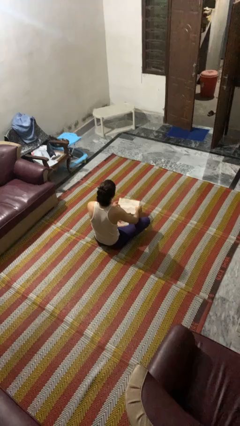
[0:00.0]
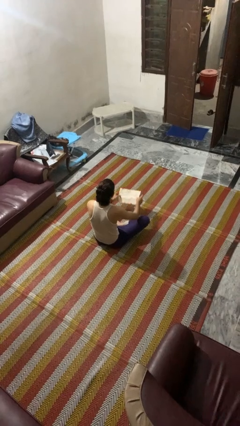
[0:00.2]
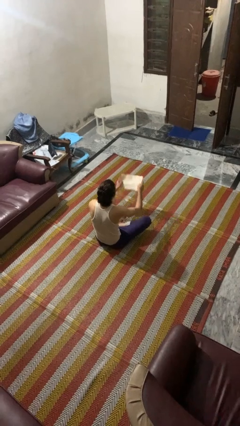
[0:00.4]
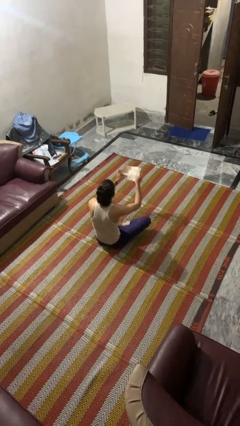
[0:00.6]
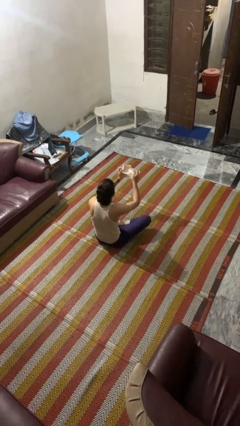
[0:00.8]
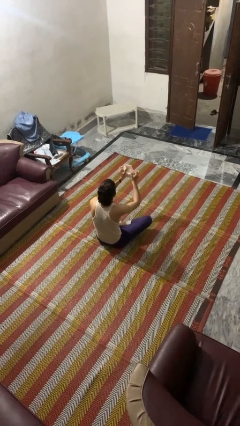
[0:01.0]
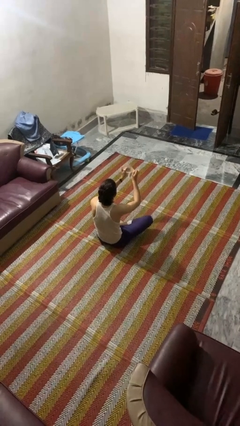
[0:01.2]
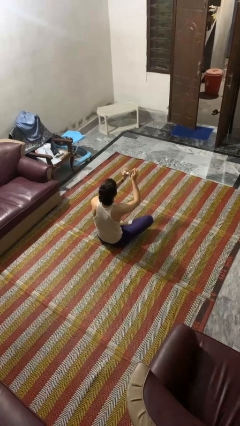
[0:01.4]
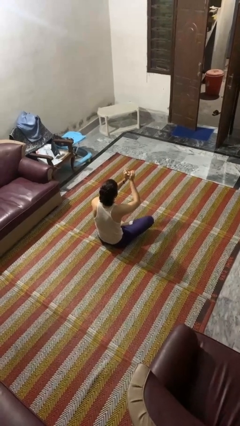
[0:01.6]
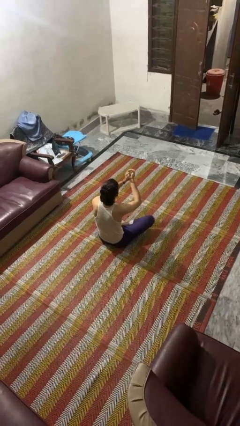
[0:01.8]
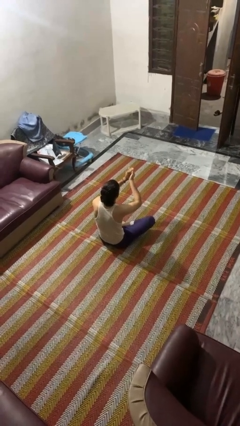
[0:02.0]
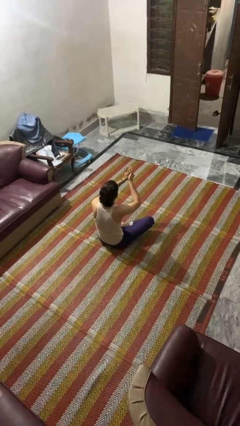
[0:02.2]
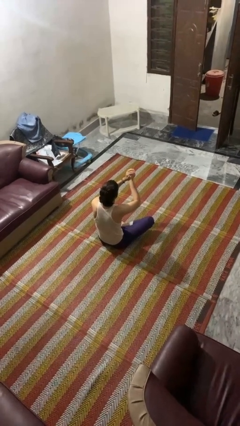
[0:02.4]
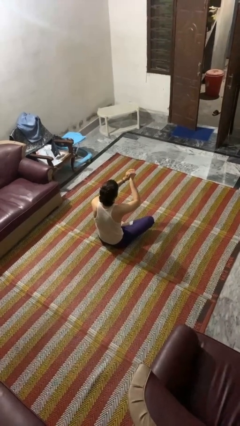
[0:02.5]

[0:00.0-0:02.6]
person crumples paper

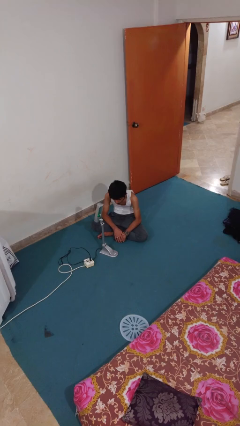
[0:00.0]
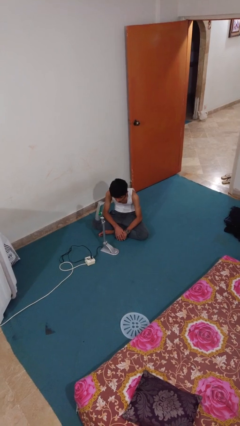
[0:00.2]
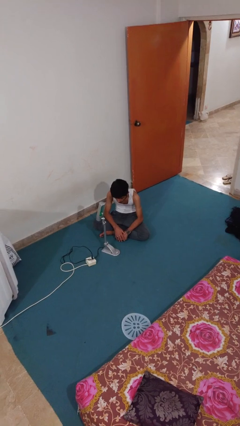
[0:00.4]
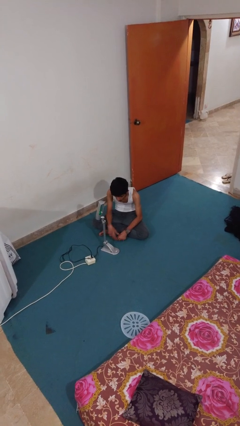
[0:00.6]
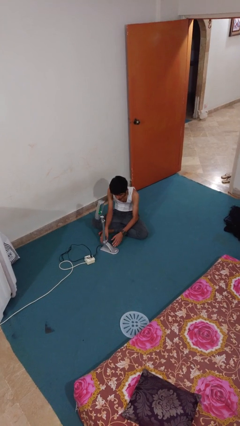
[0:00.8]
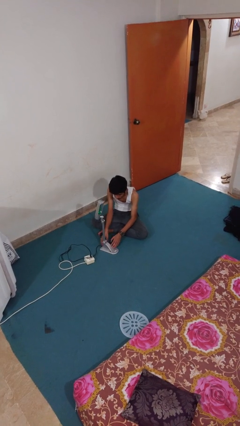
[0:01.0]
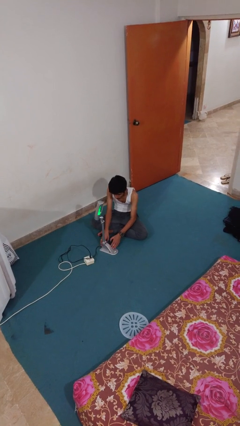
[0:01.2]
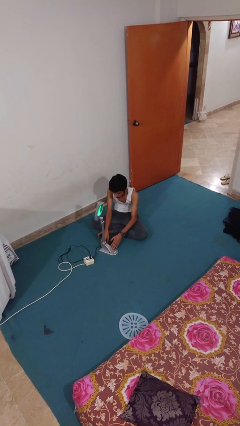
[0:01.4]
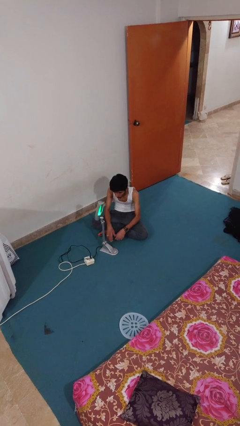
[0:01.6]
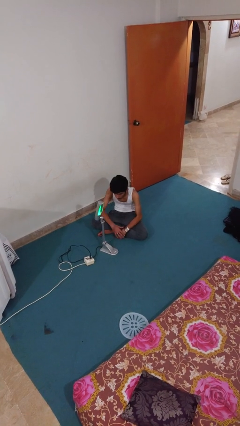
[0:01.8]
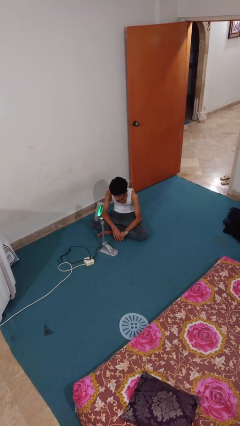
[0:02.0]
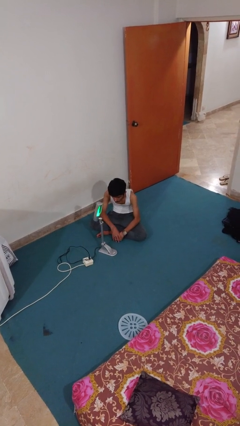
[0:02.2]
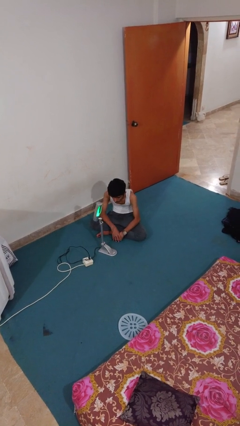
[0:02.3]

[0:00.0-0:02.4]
person turns on lamp
